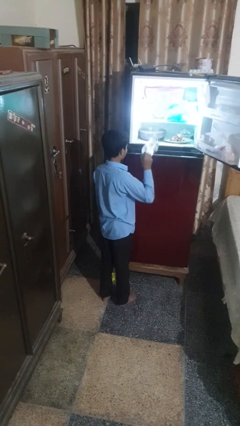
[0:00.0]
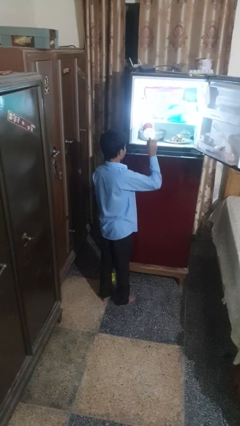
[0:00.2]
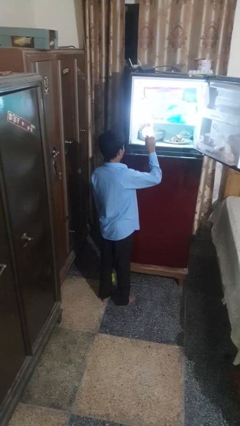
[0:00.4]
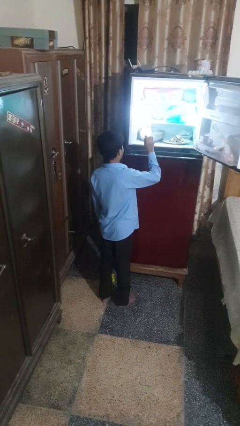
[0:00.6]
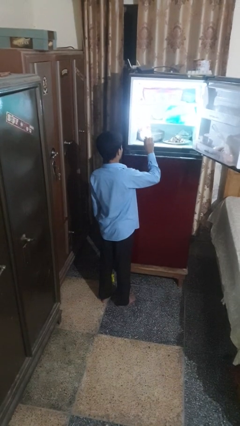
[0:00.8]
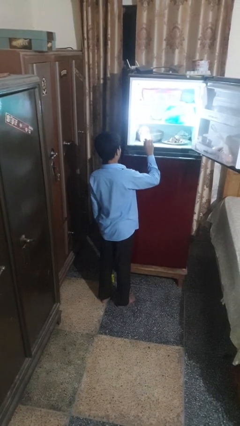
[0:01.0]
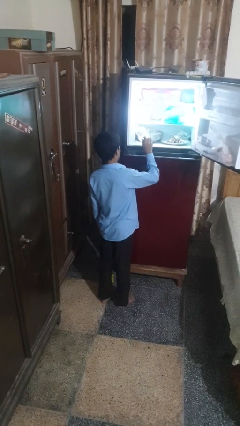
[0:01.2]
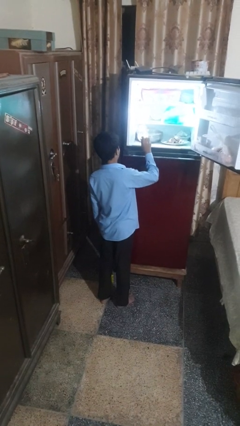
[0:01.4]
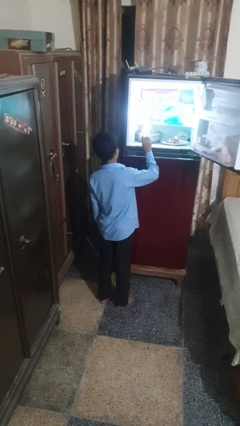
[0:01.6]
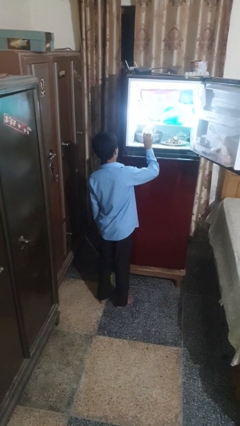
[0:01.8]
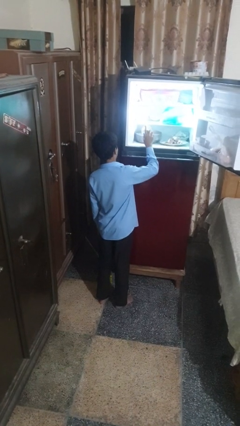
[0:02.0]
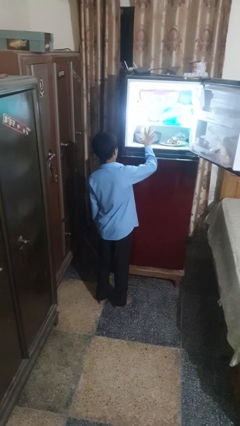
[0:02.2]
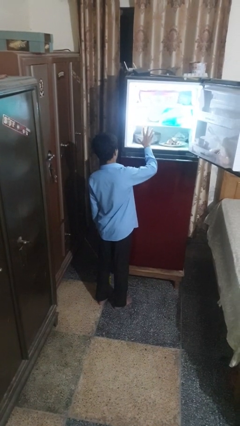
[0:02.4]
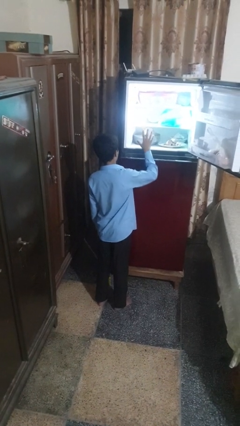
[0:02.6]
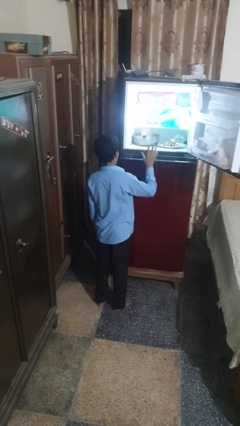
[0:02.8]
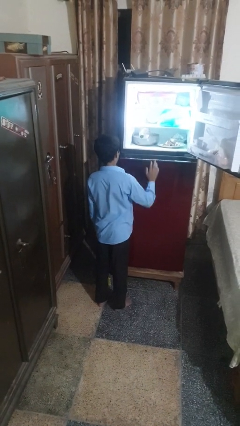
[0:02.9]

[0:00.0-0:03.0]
person puts object into refrigerator

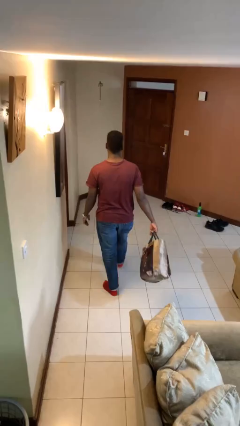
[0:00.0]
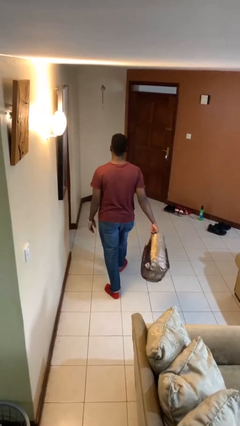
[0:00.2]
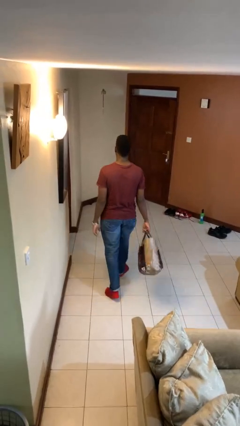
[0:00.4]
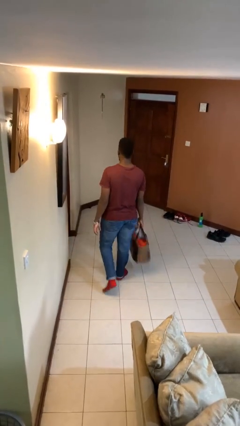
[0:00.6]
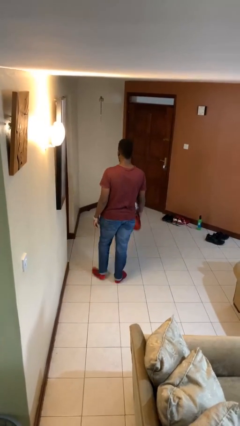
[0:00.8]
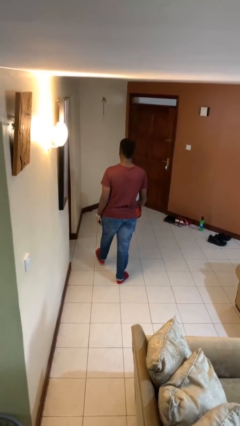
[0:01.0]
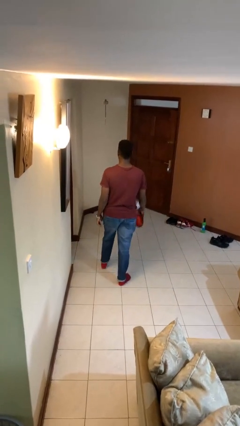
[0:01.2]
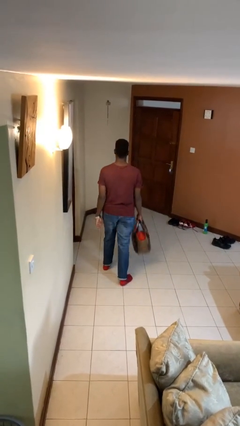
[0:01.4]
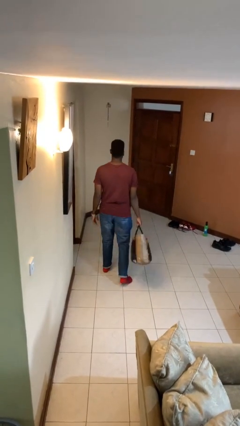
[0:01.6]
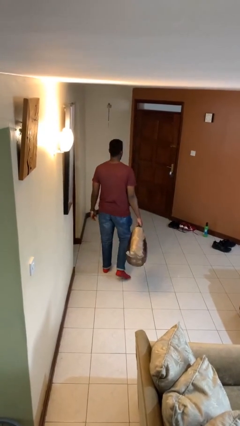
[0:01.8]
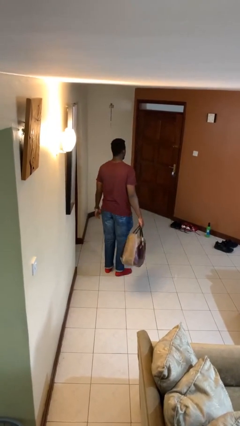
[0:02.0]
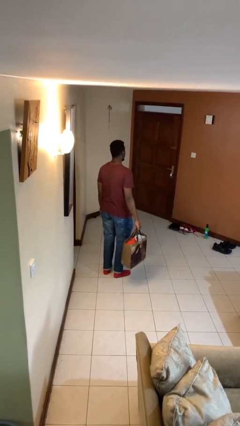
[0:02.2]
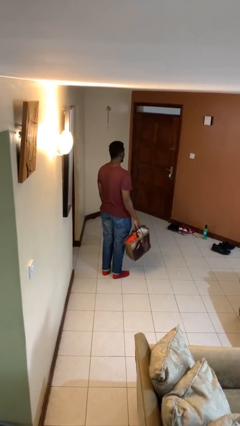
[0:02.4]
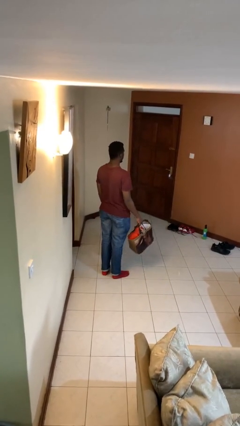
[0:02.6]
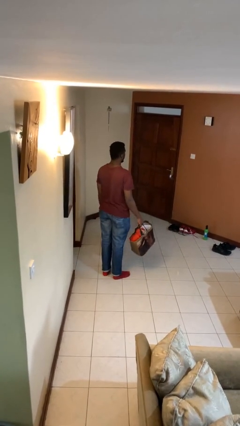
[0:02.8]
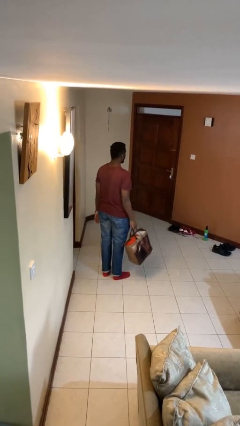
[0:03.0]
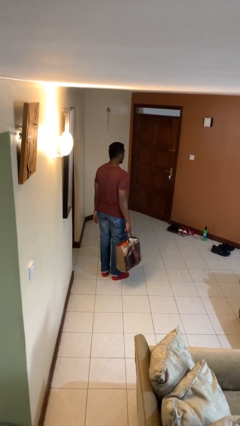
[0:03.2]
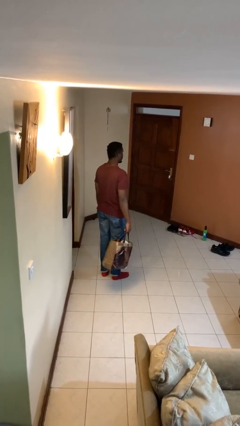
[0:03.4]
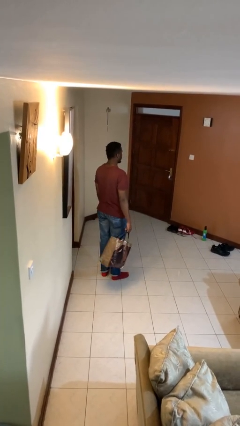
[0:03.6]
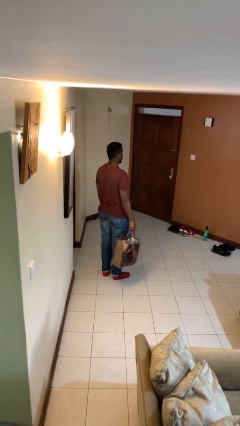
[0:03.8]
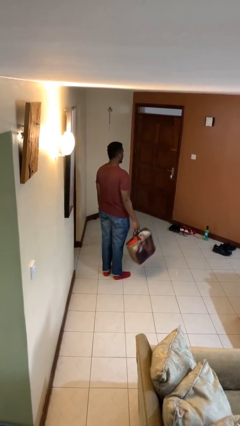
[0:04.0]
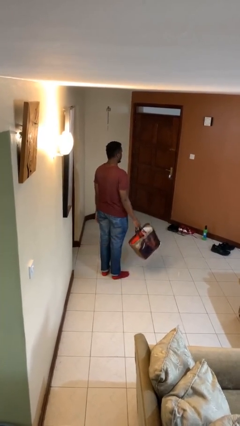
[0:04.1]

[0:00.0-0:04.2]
person carries groceries

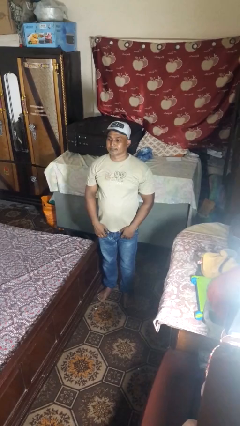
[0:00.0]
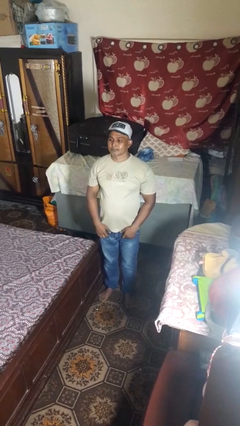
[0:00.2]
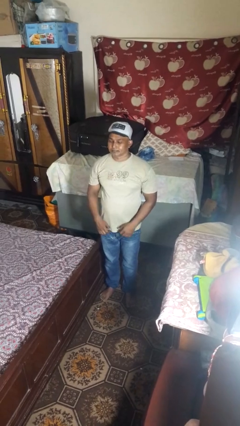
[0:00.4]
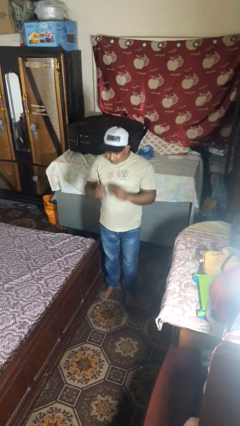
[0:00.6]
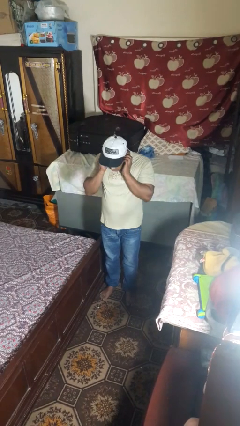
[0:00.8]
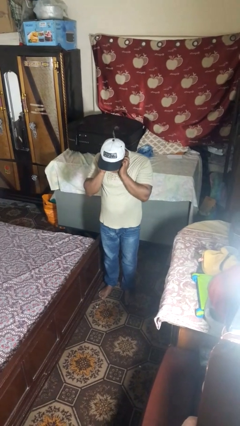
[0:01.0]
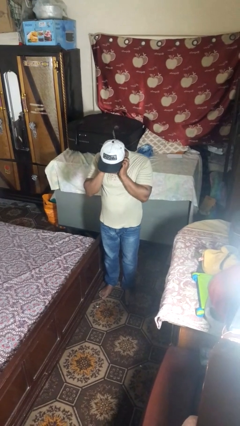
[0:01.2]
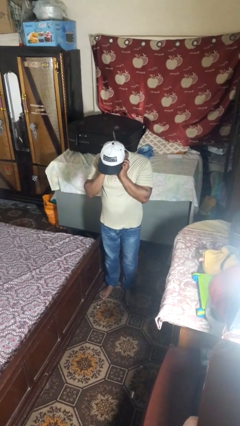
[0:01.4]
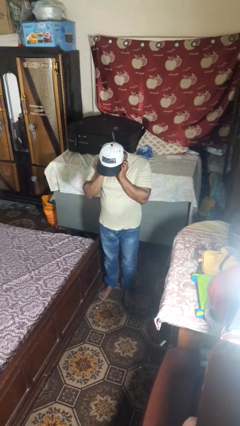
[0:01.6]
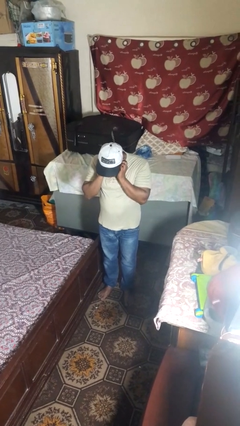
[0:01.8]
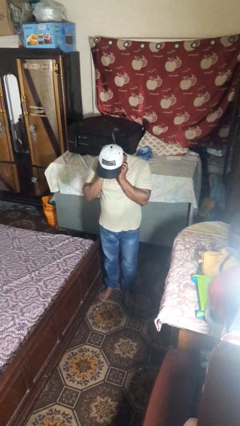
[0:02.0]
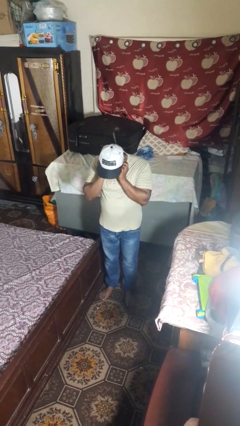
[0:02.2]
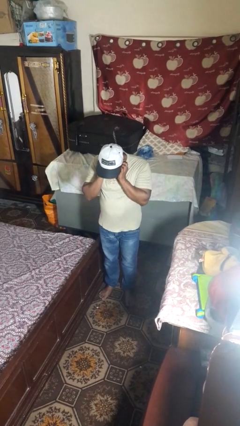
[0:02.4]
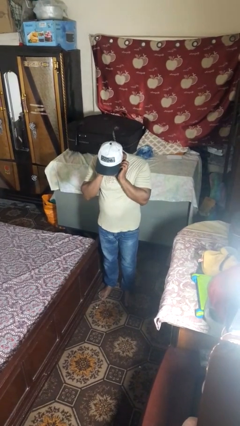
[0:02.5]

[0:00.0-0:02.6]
person puts fingers in ear

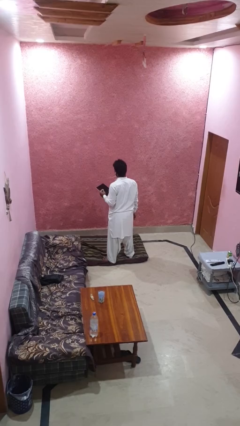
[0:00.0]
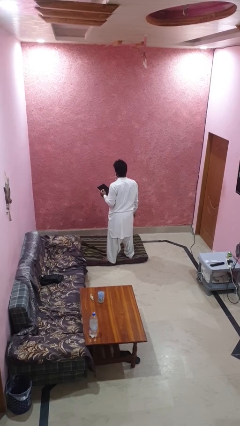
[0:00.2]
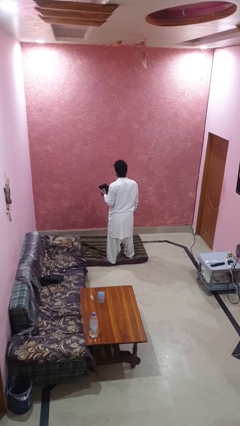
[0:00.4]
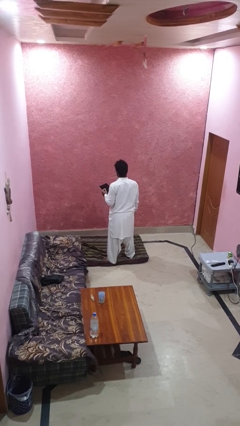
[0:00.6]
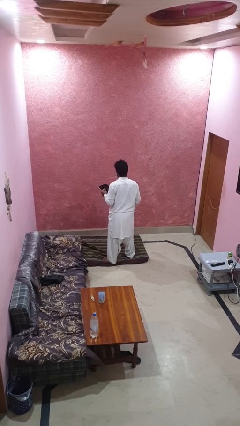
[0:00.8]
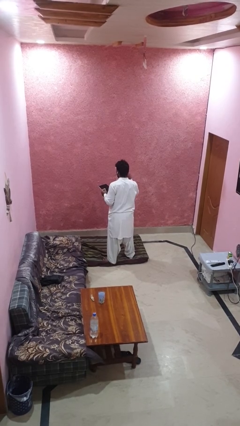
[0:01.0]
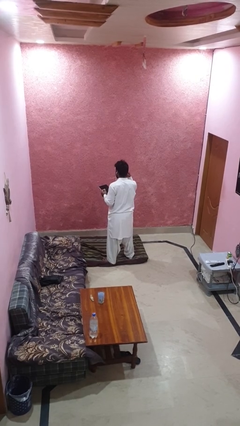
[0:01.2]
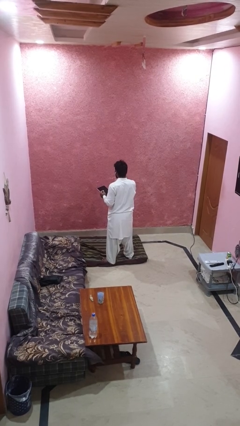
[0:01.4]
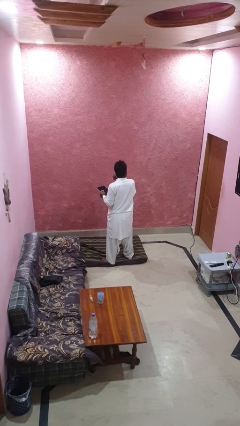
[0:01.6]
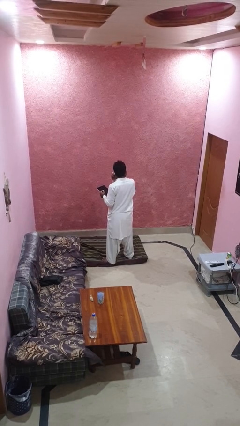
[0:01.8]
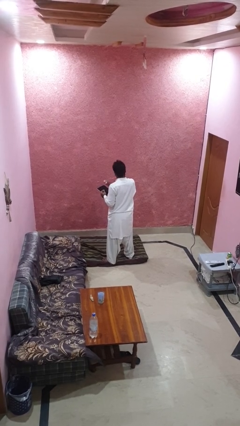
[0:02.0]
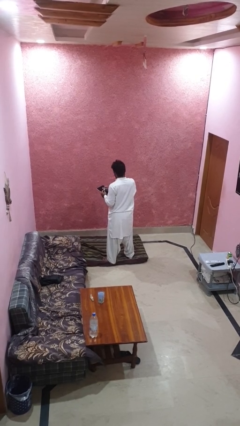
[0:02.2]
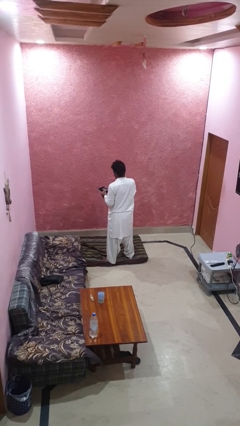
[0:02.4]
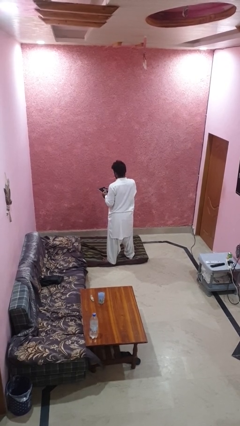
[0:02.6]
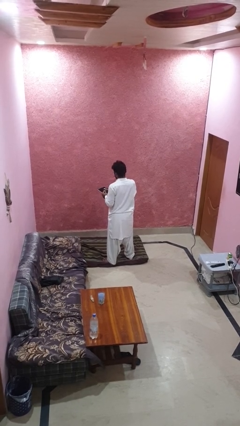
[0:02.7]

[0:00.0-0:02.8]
person takes off headphones

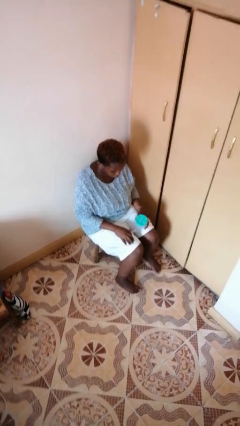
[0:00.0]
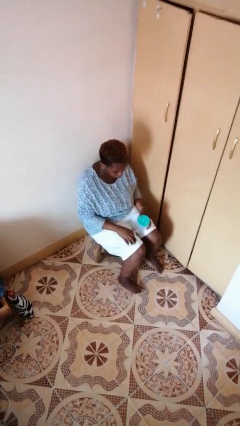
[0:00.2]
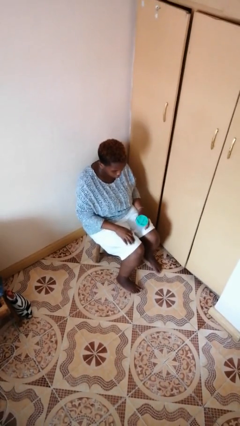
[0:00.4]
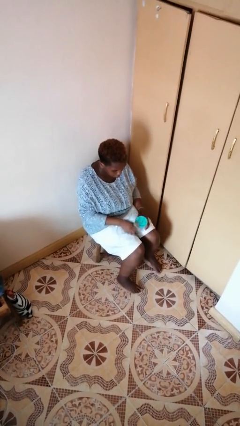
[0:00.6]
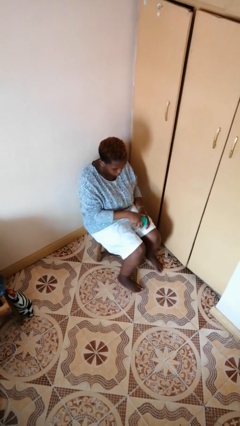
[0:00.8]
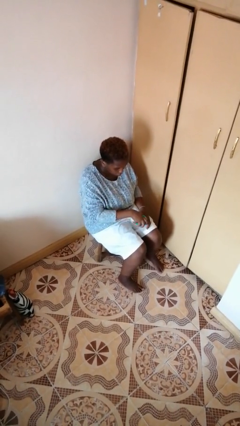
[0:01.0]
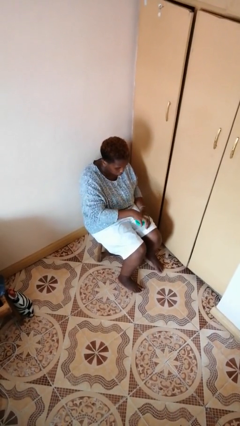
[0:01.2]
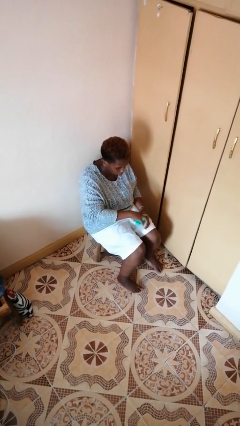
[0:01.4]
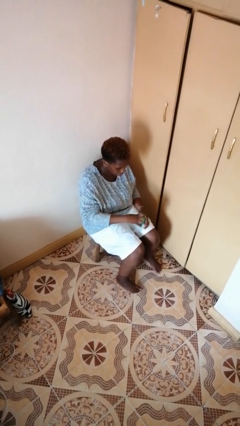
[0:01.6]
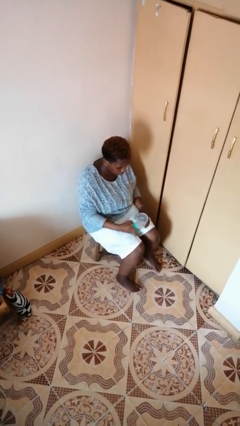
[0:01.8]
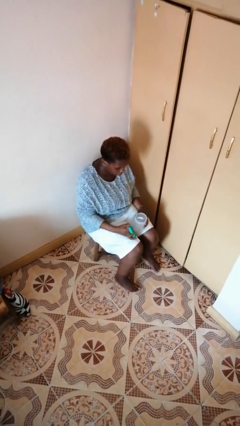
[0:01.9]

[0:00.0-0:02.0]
person opens jar

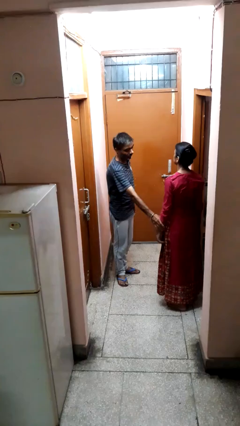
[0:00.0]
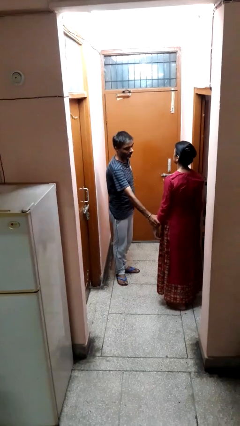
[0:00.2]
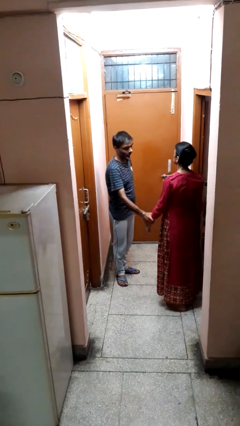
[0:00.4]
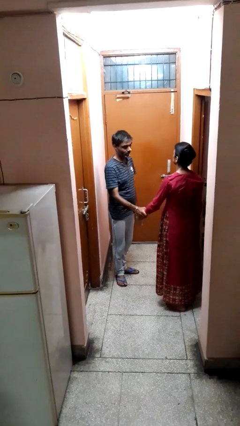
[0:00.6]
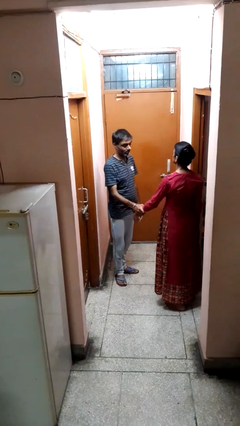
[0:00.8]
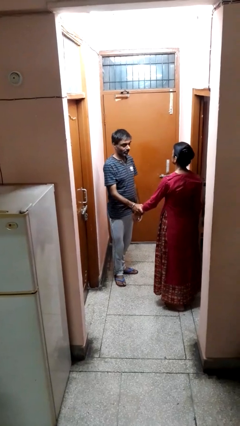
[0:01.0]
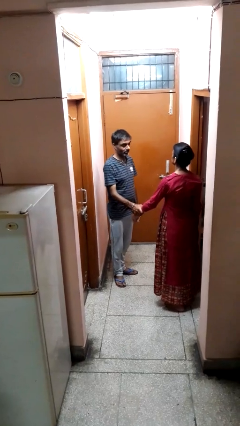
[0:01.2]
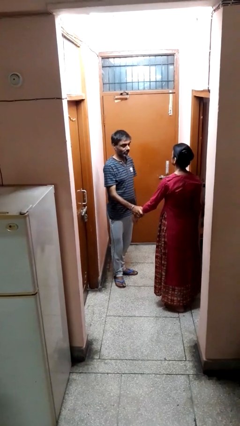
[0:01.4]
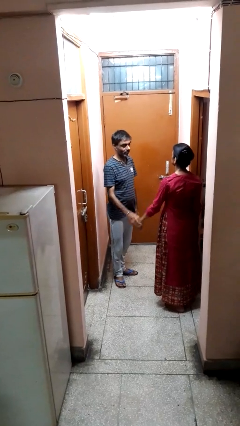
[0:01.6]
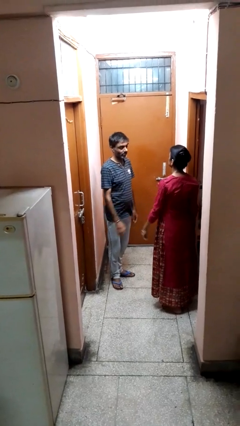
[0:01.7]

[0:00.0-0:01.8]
person grabs person by forearm

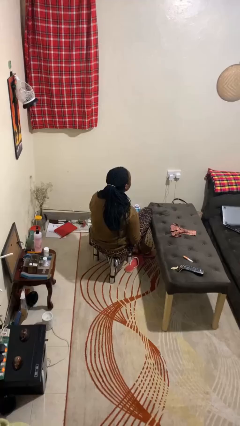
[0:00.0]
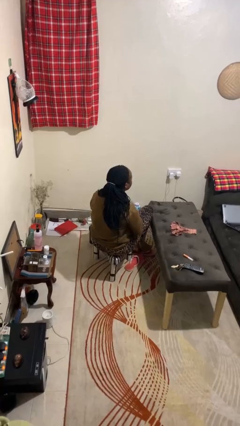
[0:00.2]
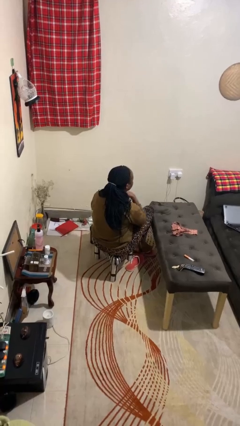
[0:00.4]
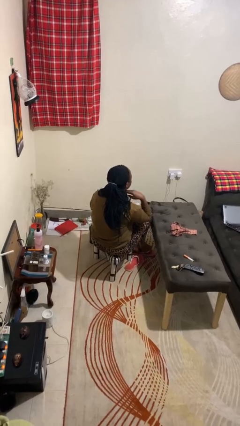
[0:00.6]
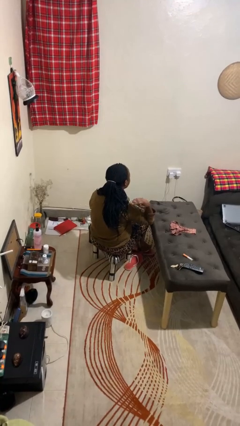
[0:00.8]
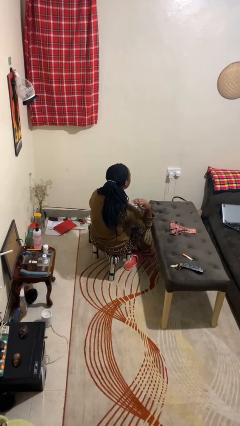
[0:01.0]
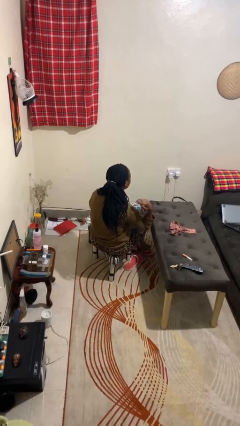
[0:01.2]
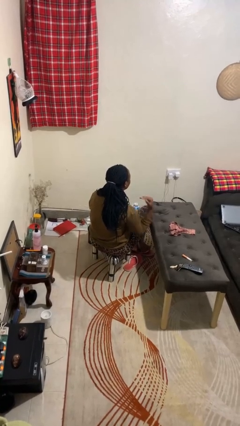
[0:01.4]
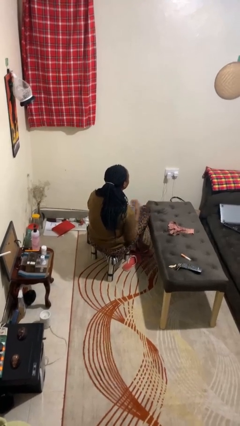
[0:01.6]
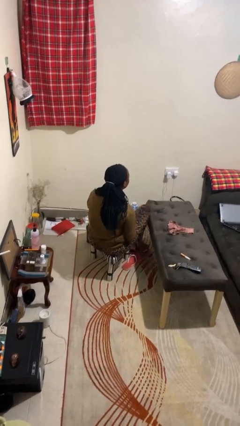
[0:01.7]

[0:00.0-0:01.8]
person gestures cut
